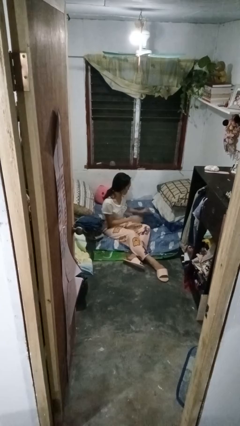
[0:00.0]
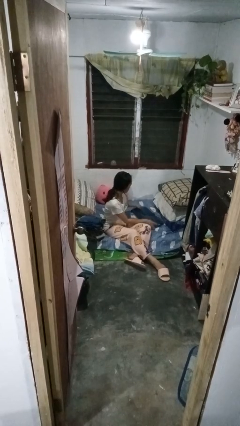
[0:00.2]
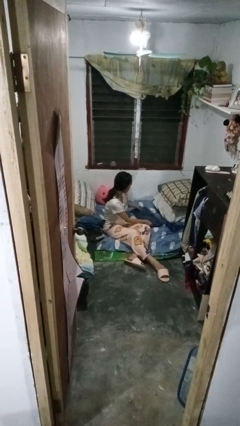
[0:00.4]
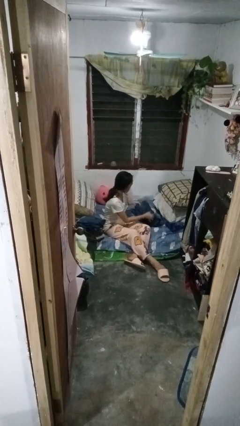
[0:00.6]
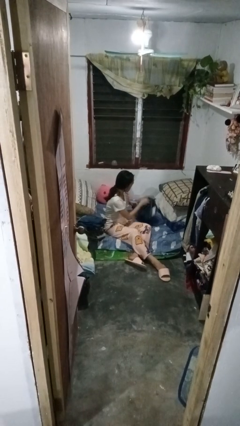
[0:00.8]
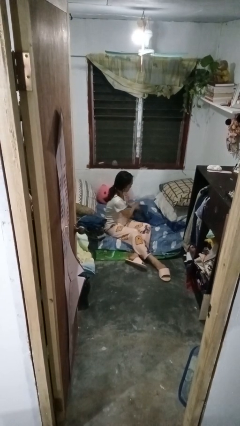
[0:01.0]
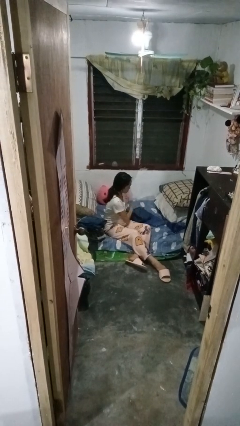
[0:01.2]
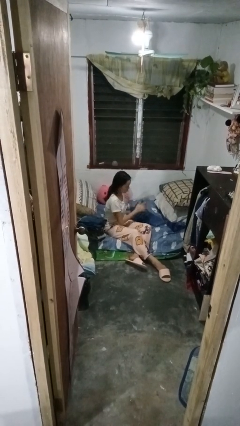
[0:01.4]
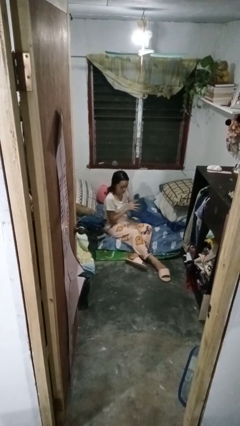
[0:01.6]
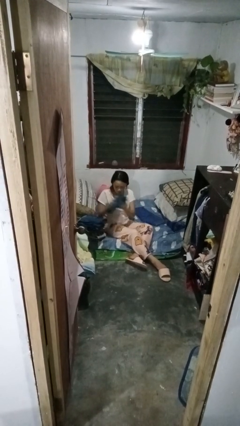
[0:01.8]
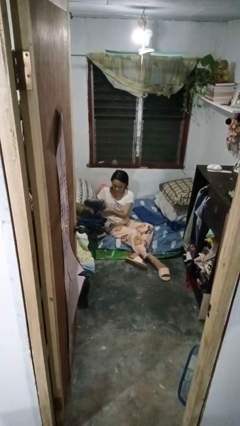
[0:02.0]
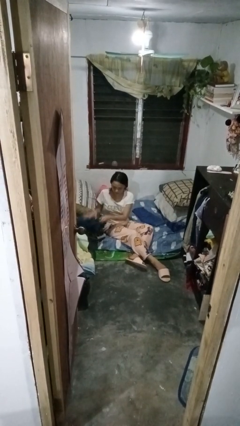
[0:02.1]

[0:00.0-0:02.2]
person folds pants

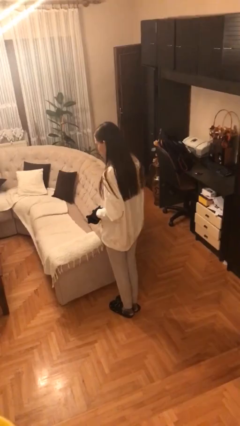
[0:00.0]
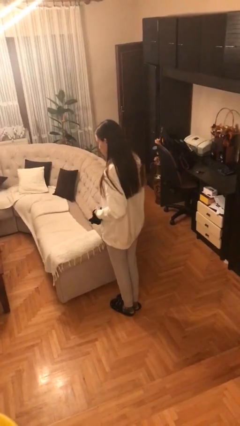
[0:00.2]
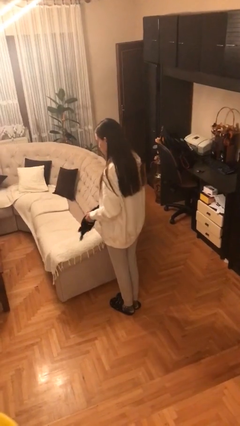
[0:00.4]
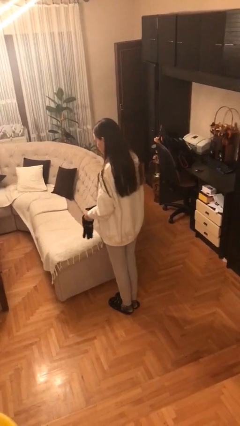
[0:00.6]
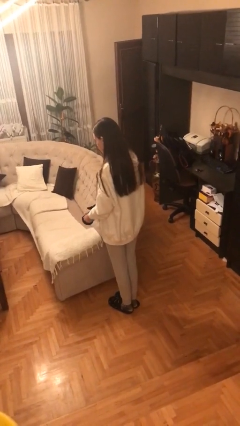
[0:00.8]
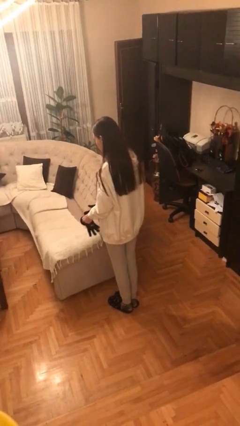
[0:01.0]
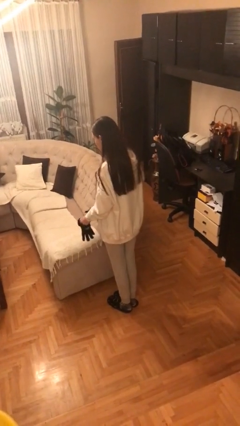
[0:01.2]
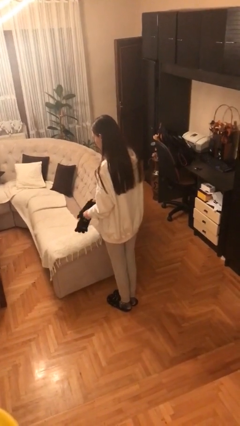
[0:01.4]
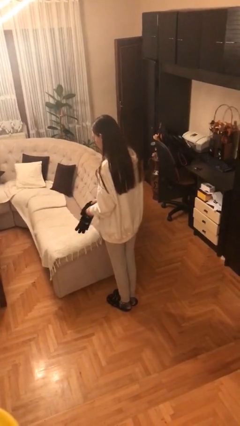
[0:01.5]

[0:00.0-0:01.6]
person takes off gloves

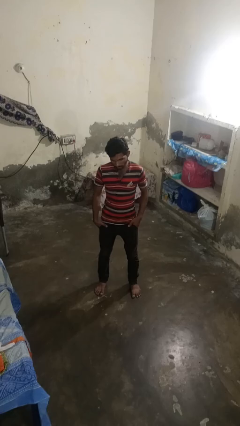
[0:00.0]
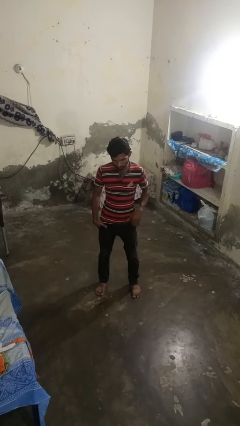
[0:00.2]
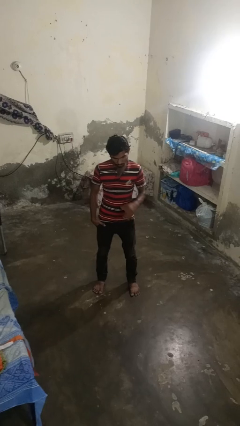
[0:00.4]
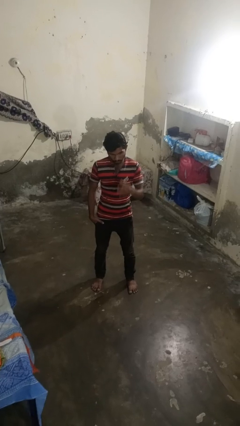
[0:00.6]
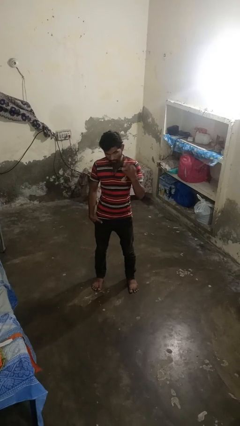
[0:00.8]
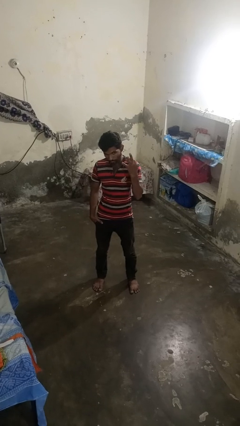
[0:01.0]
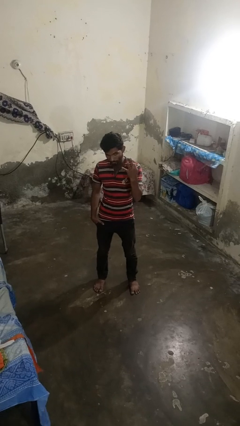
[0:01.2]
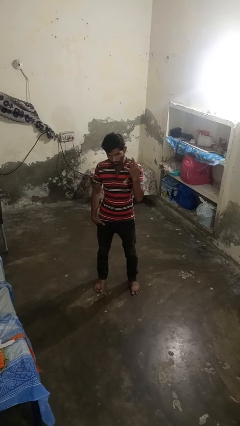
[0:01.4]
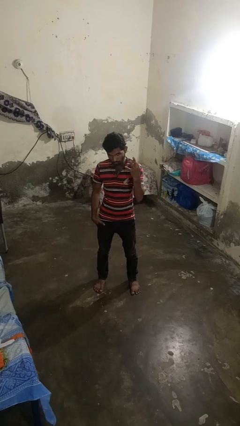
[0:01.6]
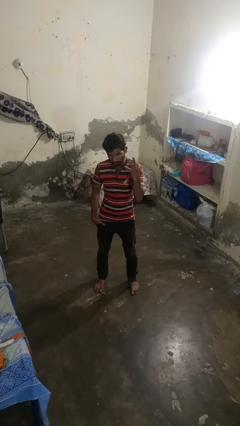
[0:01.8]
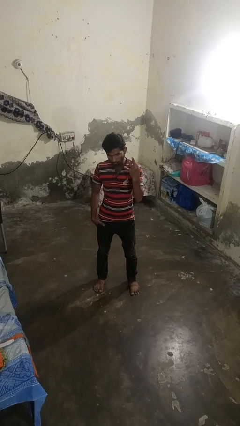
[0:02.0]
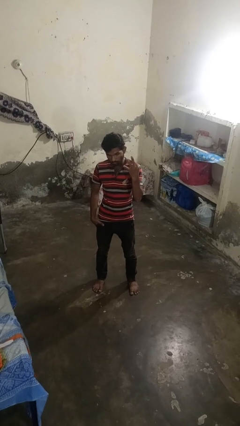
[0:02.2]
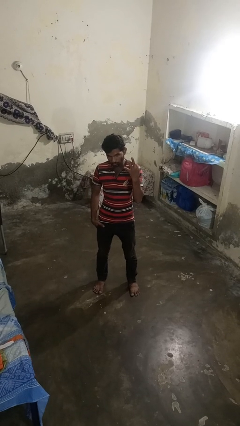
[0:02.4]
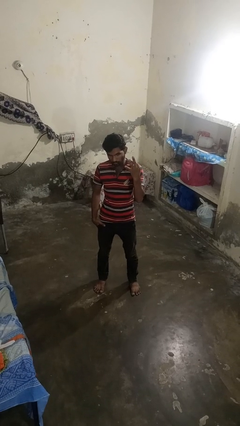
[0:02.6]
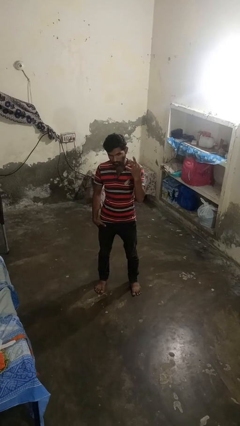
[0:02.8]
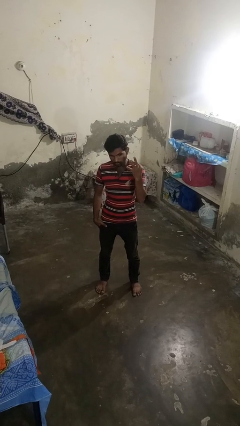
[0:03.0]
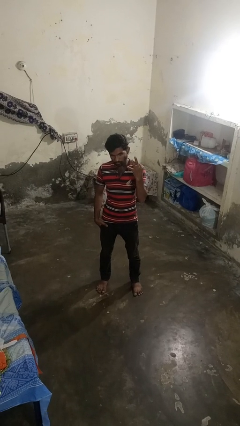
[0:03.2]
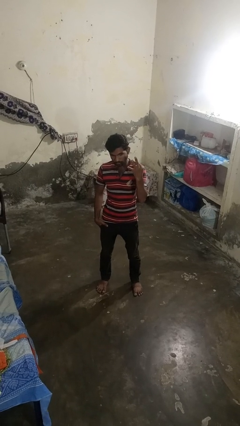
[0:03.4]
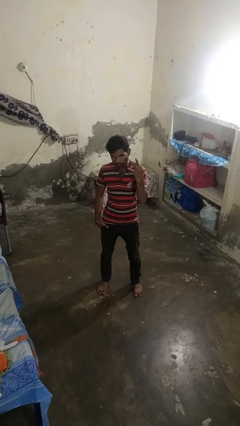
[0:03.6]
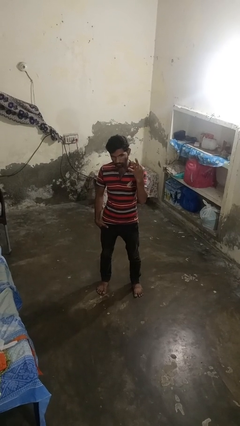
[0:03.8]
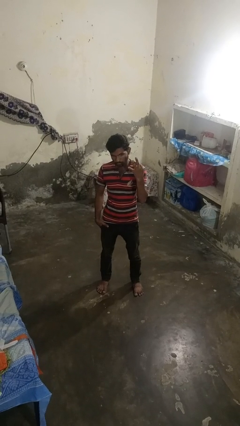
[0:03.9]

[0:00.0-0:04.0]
person gestures number three

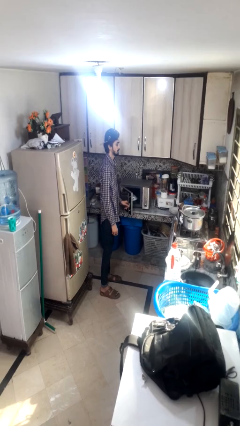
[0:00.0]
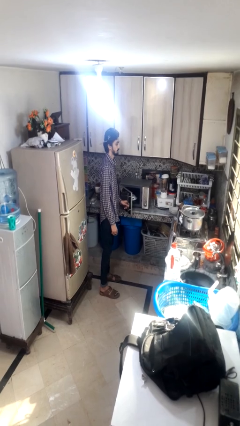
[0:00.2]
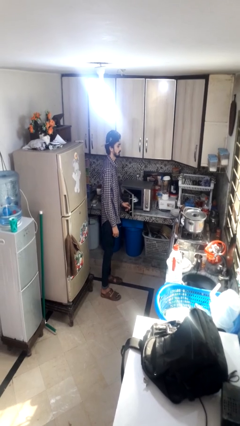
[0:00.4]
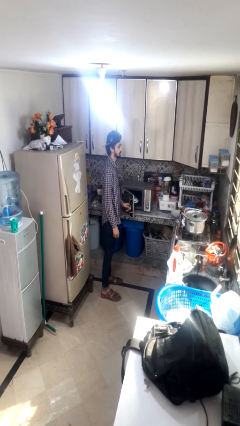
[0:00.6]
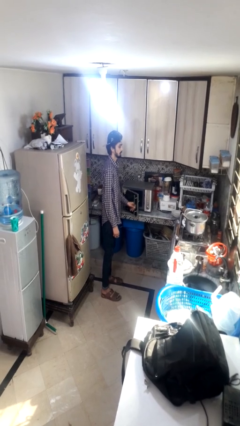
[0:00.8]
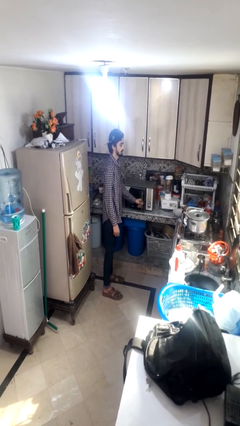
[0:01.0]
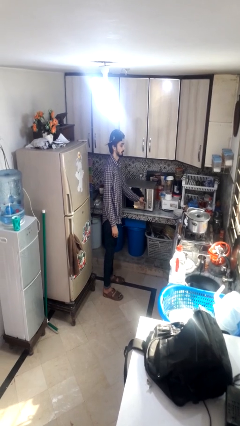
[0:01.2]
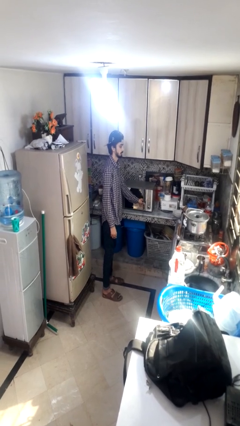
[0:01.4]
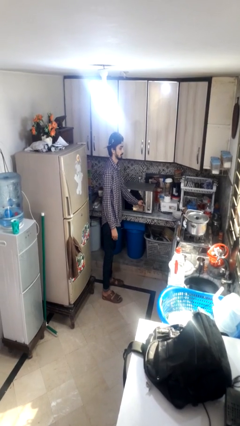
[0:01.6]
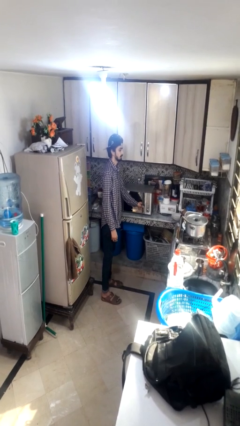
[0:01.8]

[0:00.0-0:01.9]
person closes microwave

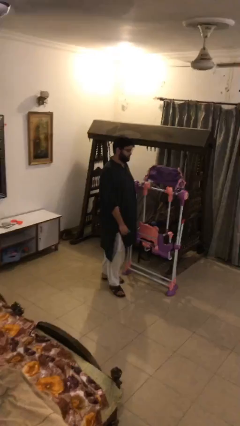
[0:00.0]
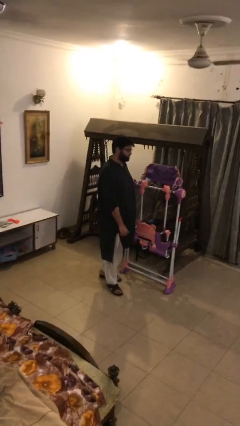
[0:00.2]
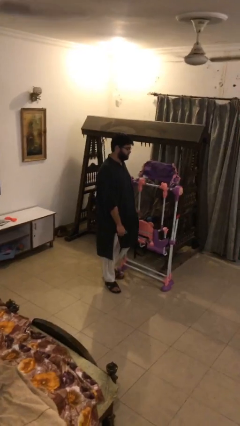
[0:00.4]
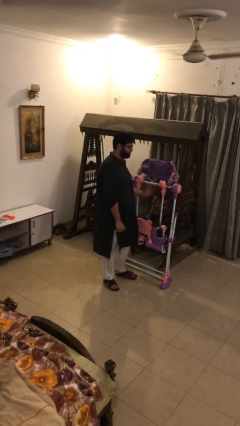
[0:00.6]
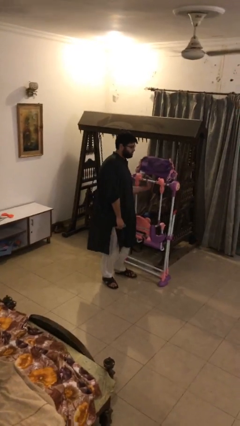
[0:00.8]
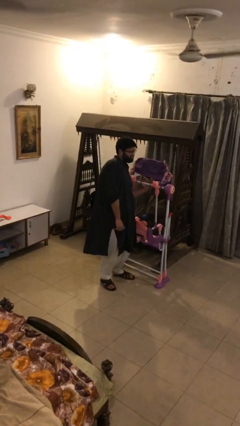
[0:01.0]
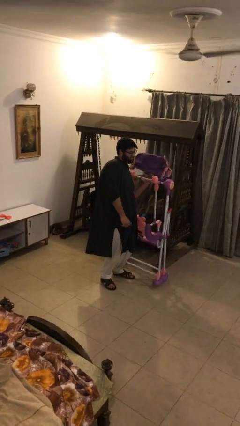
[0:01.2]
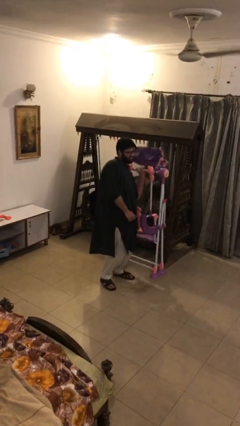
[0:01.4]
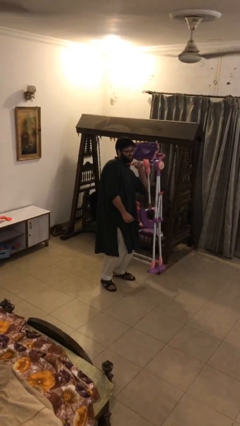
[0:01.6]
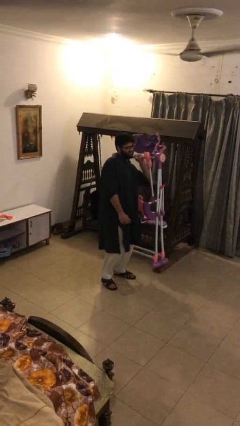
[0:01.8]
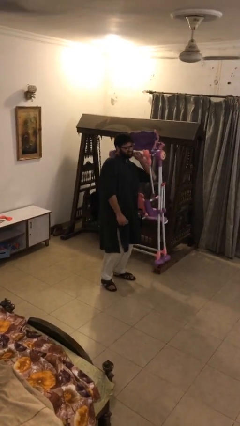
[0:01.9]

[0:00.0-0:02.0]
person picks up object from floor

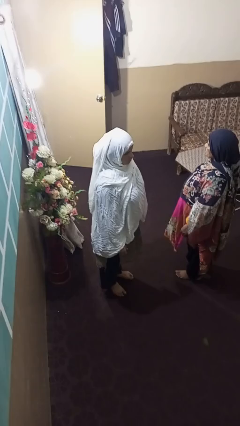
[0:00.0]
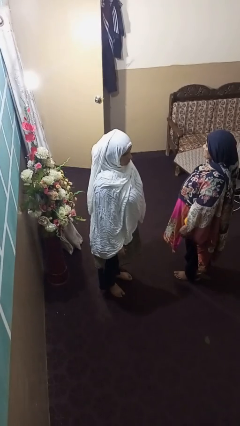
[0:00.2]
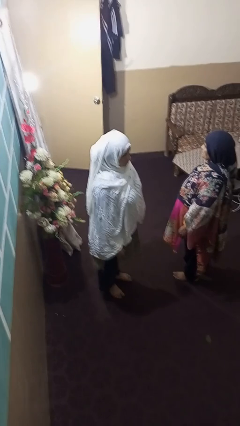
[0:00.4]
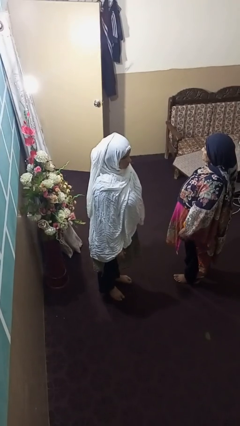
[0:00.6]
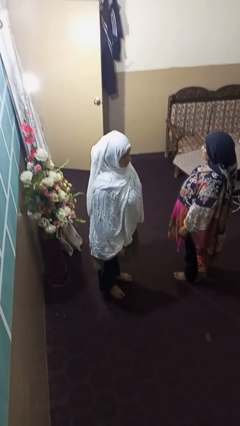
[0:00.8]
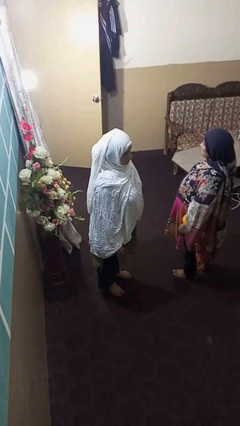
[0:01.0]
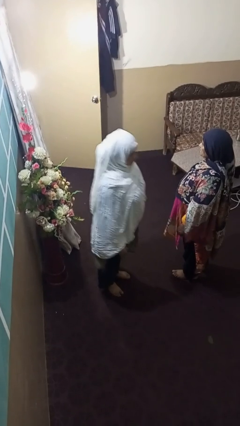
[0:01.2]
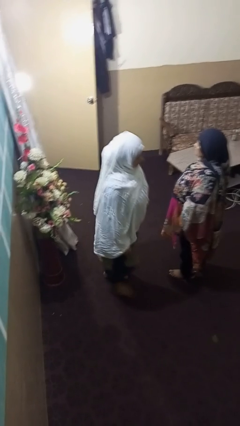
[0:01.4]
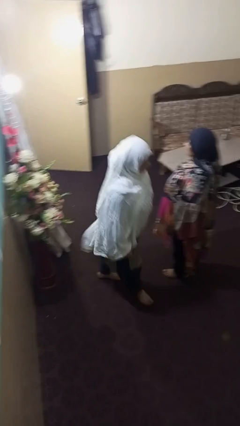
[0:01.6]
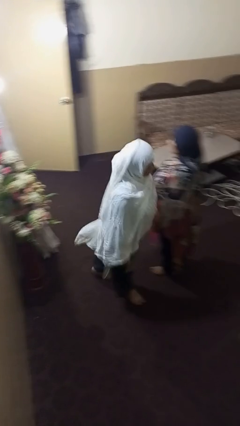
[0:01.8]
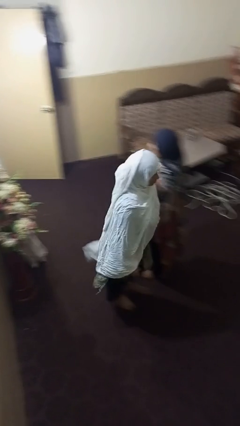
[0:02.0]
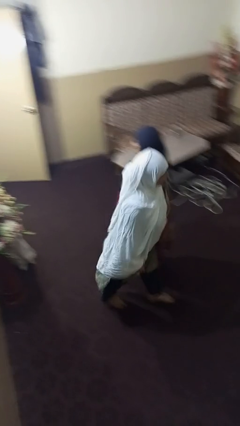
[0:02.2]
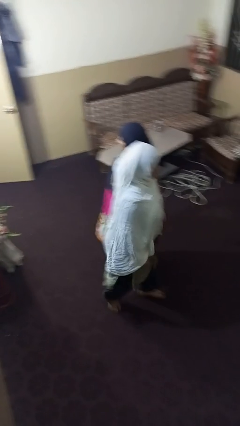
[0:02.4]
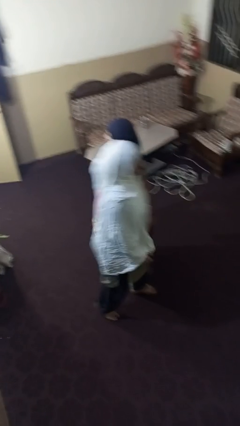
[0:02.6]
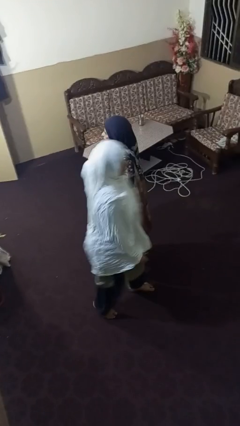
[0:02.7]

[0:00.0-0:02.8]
person shoves person

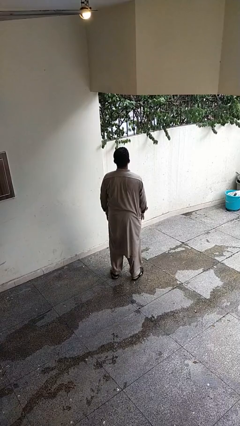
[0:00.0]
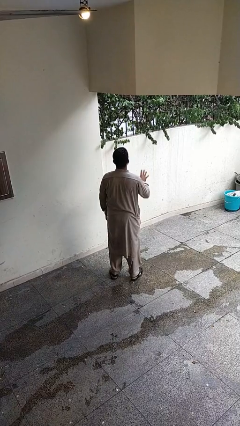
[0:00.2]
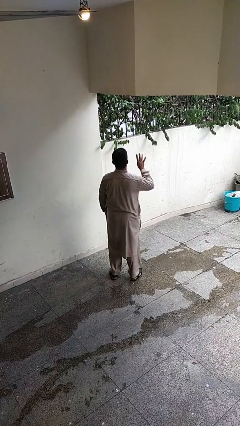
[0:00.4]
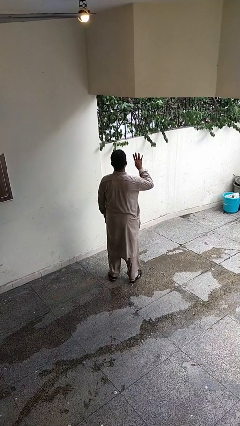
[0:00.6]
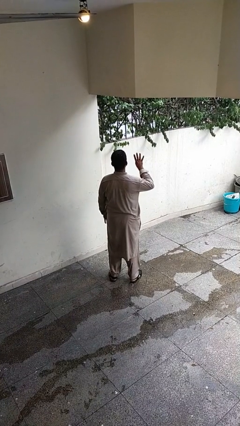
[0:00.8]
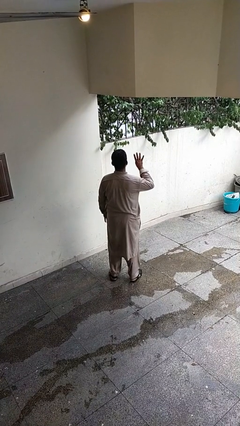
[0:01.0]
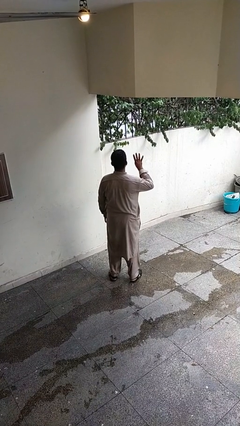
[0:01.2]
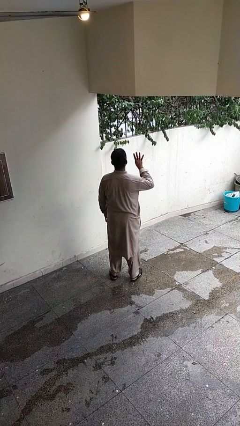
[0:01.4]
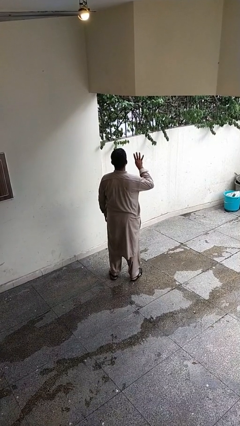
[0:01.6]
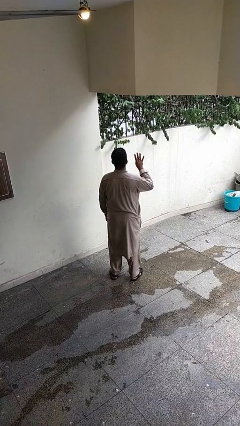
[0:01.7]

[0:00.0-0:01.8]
person gestures number four

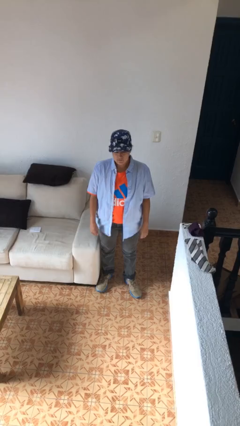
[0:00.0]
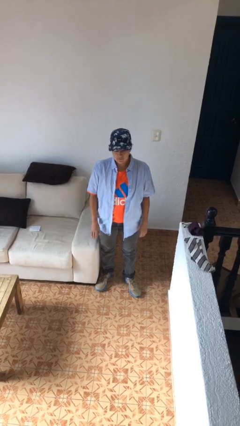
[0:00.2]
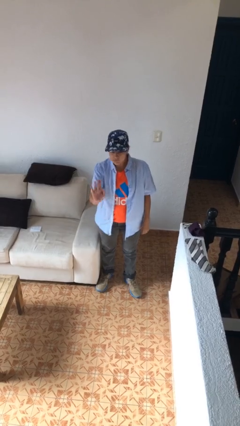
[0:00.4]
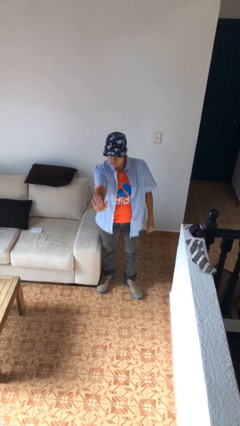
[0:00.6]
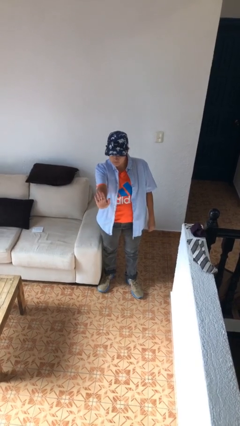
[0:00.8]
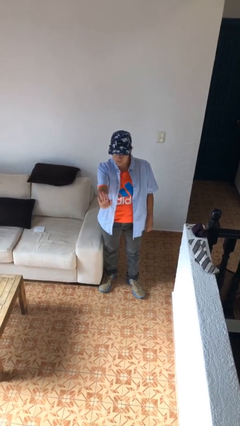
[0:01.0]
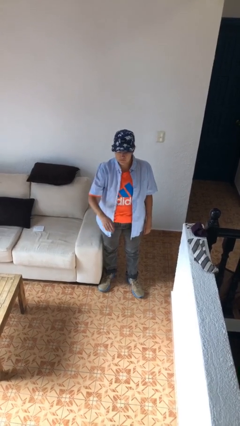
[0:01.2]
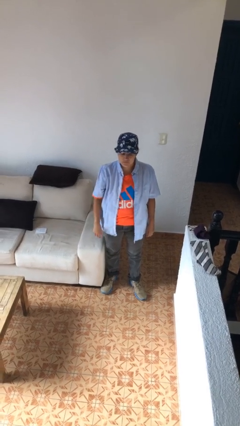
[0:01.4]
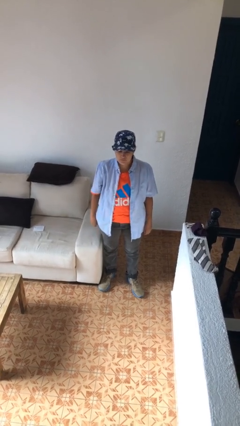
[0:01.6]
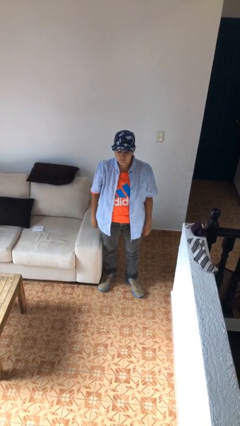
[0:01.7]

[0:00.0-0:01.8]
person gestures stop